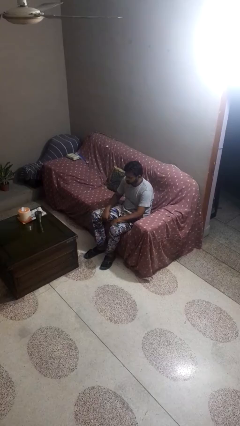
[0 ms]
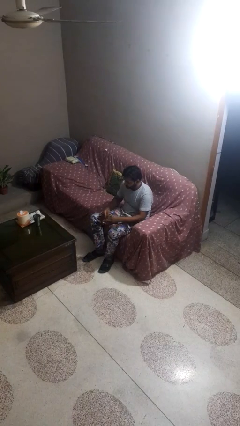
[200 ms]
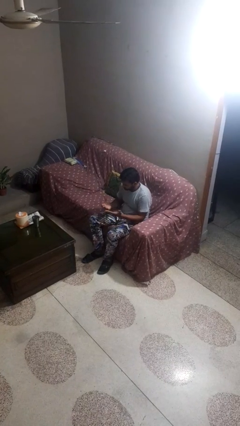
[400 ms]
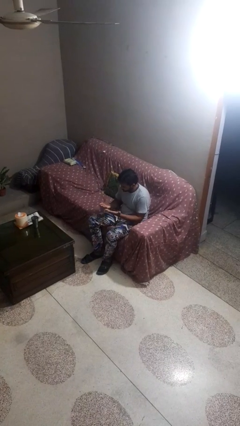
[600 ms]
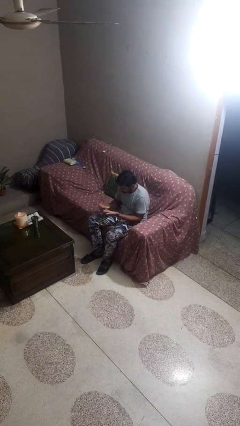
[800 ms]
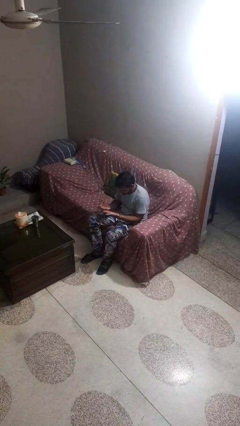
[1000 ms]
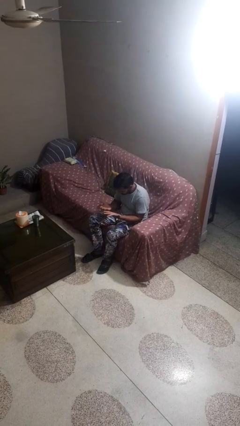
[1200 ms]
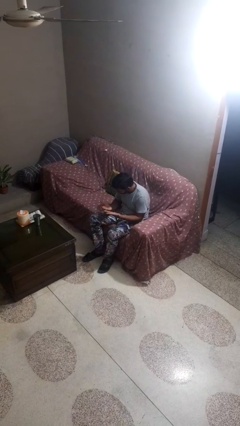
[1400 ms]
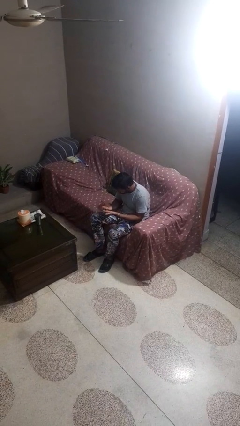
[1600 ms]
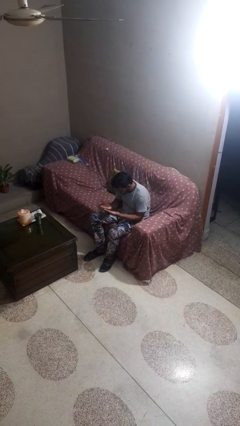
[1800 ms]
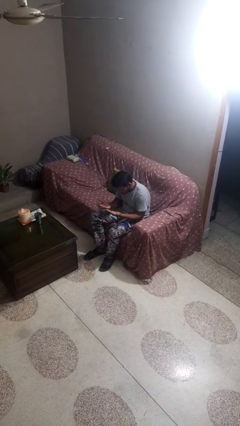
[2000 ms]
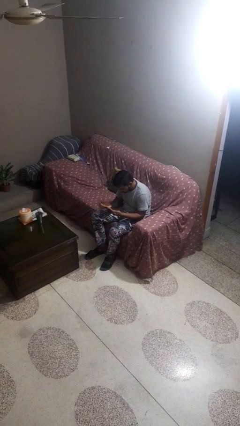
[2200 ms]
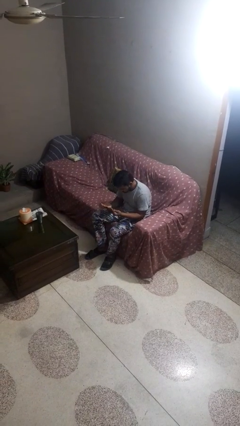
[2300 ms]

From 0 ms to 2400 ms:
person looks at hands in lap

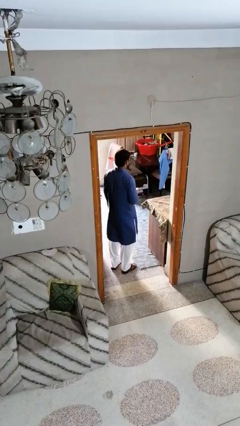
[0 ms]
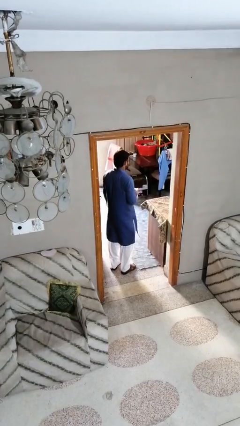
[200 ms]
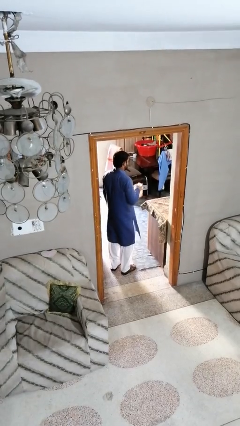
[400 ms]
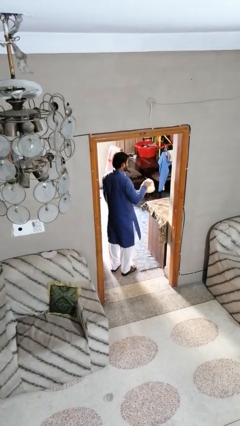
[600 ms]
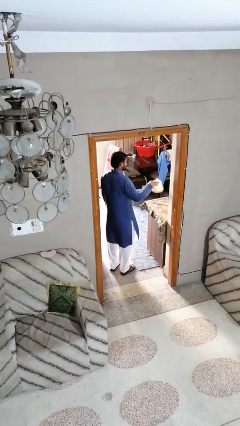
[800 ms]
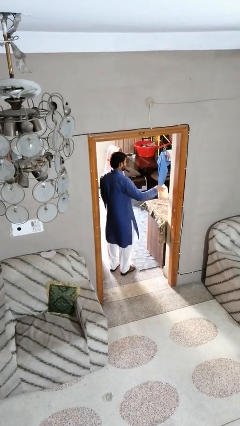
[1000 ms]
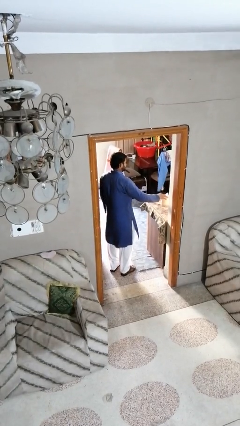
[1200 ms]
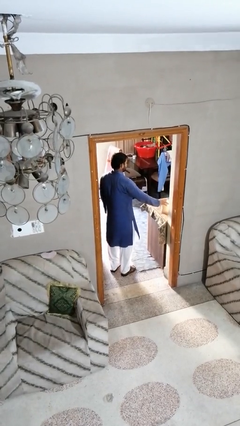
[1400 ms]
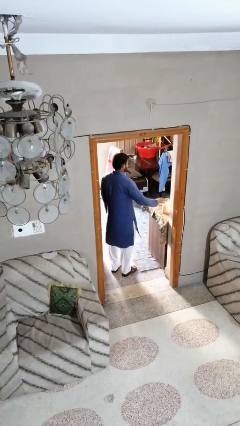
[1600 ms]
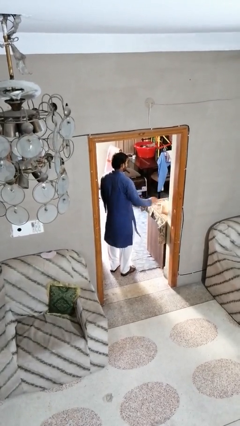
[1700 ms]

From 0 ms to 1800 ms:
person puts down object on countertop

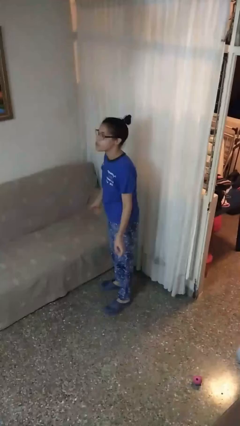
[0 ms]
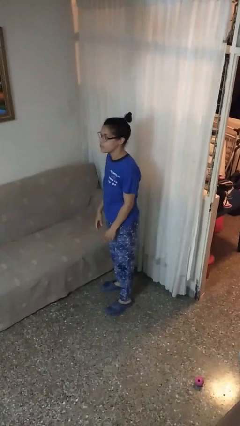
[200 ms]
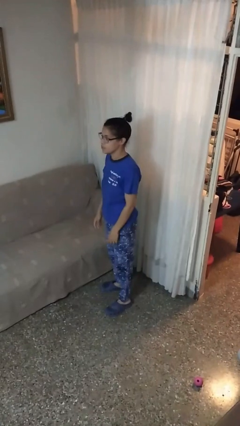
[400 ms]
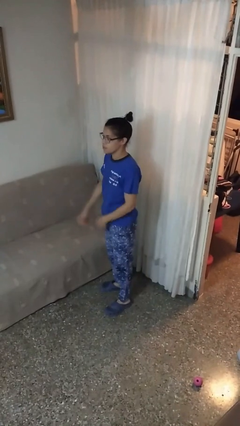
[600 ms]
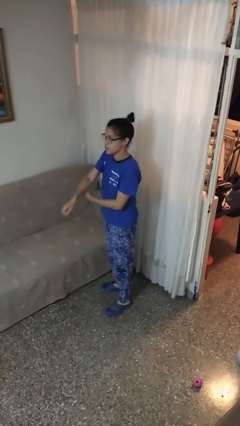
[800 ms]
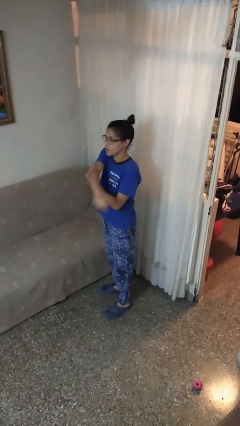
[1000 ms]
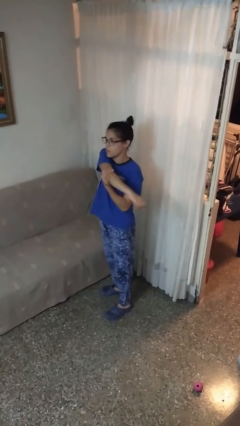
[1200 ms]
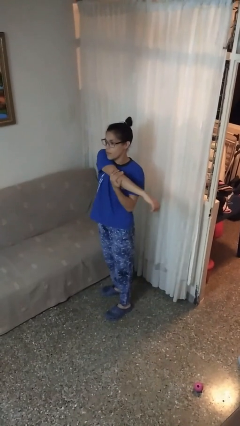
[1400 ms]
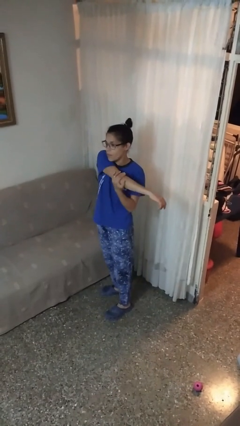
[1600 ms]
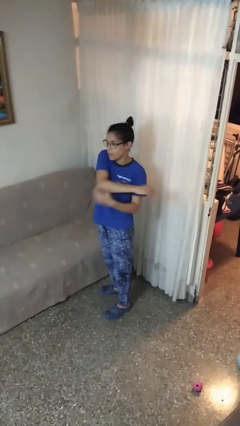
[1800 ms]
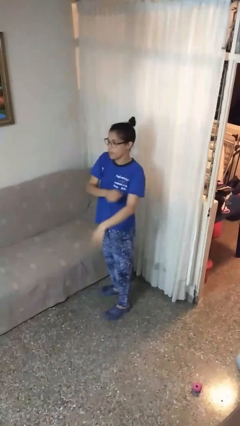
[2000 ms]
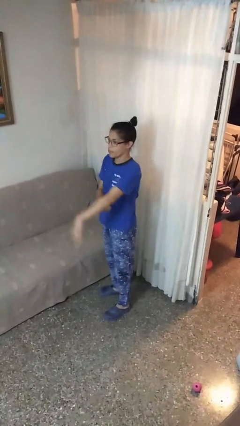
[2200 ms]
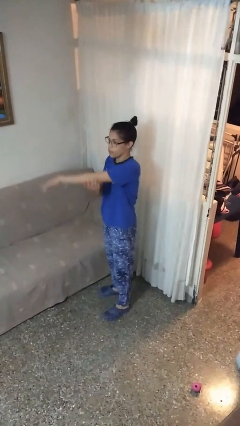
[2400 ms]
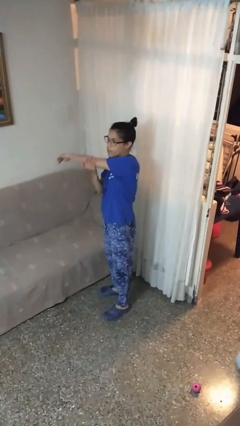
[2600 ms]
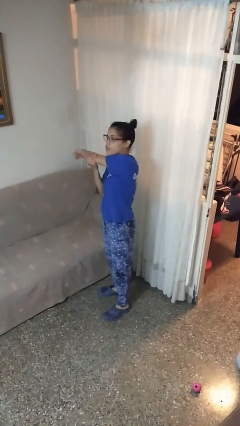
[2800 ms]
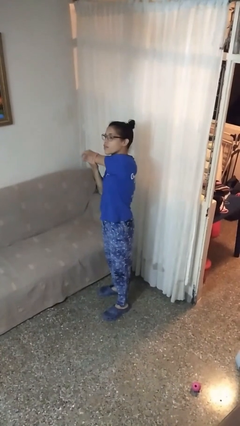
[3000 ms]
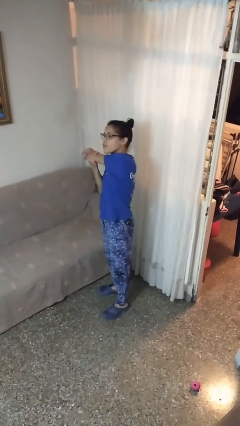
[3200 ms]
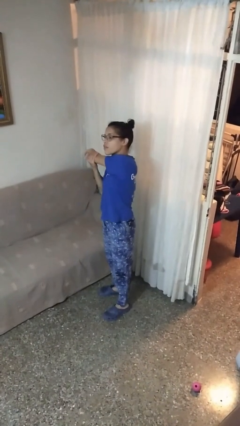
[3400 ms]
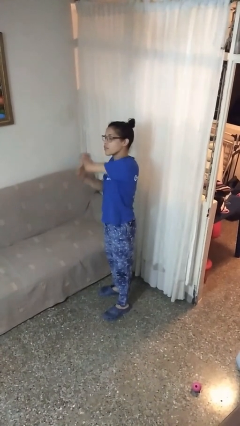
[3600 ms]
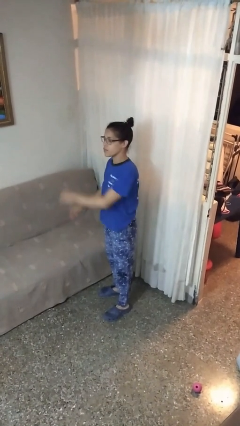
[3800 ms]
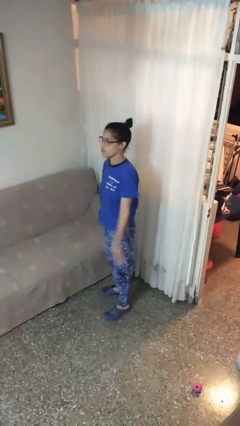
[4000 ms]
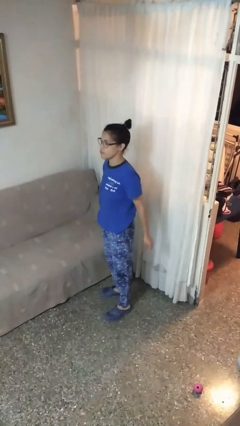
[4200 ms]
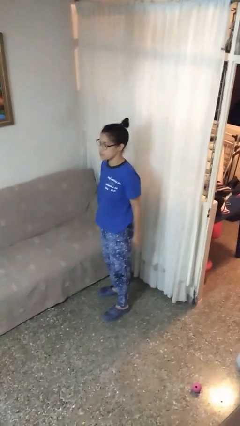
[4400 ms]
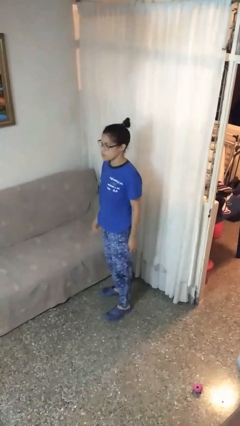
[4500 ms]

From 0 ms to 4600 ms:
person stretches arms to side

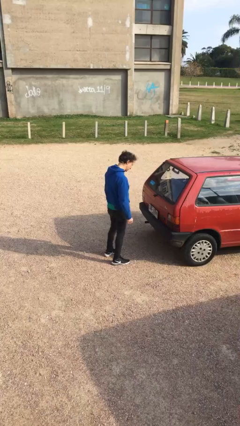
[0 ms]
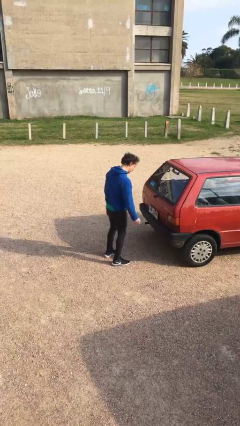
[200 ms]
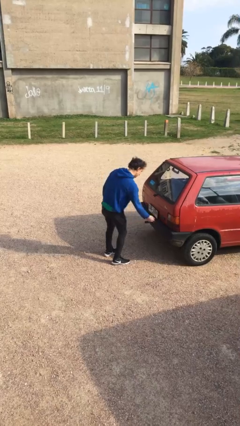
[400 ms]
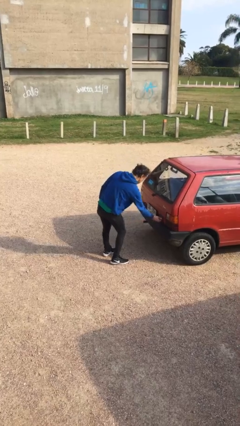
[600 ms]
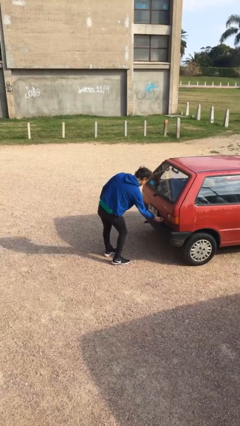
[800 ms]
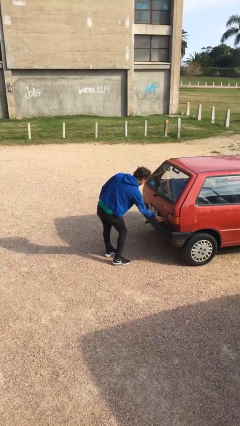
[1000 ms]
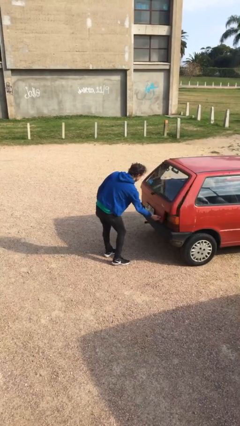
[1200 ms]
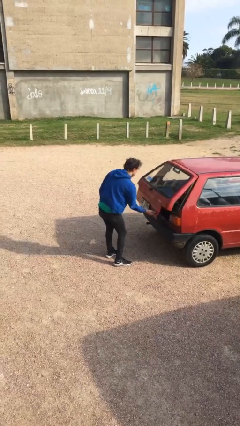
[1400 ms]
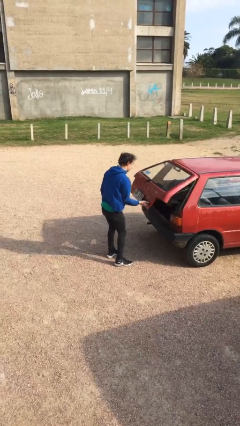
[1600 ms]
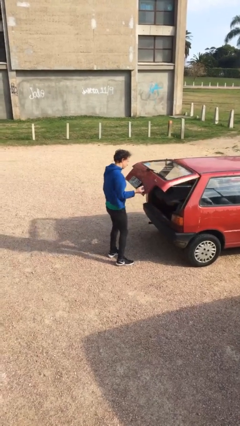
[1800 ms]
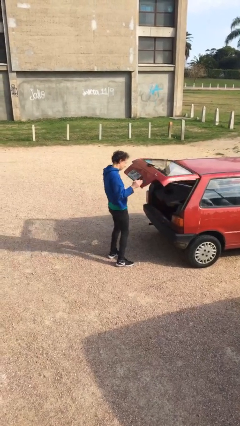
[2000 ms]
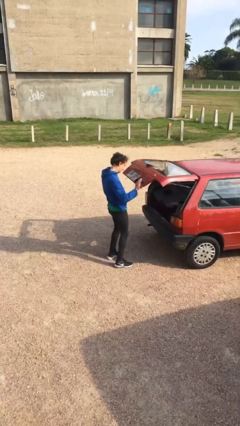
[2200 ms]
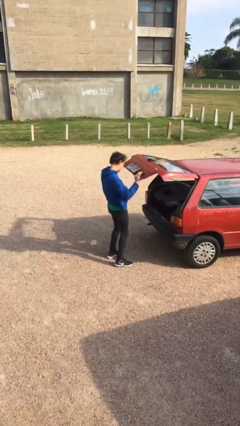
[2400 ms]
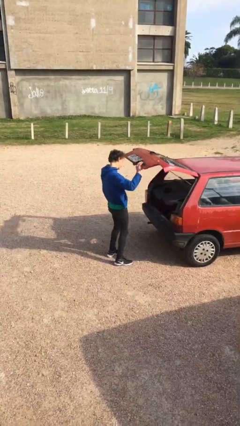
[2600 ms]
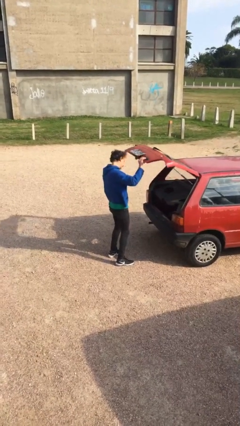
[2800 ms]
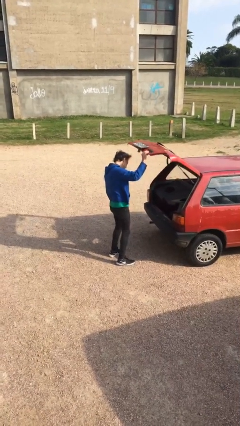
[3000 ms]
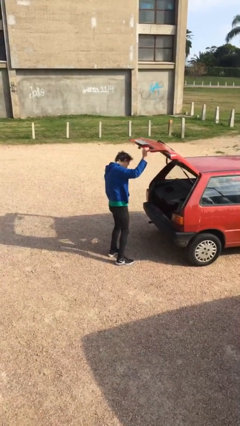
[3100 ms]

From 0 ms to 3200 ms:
person opens car door

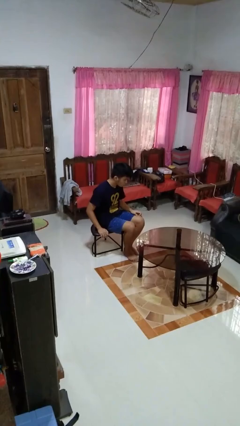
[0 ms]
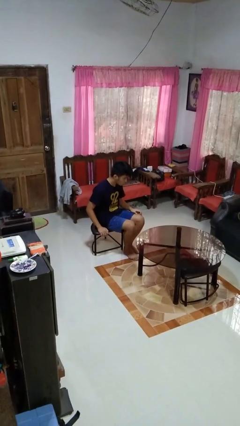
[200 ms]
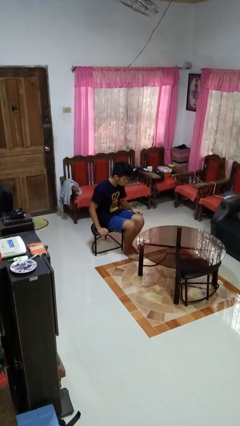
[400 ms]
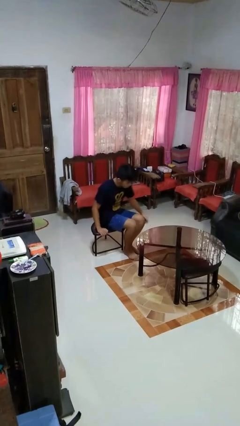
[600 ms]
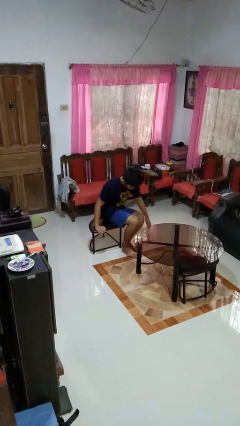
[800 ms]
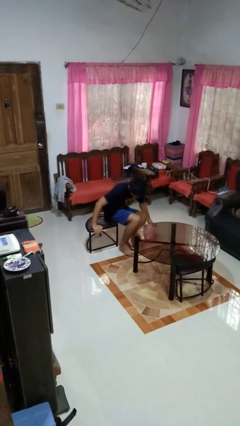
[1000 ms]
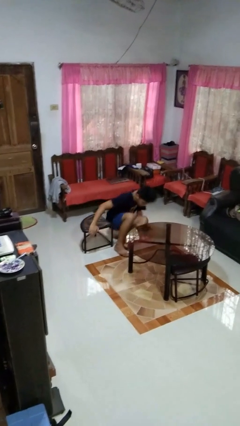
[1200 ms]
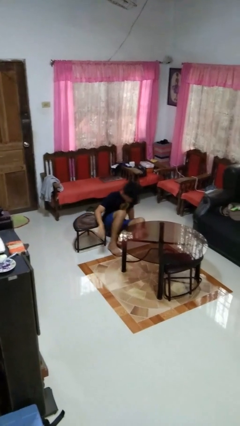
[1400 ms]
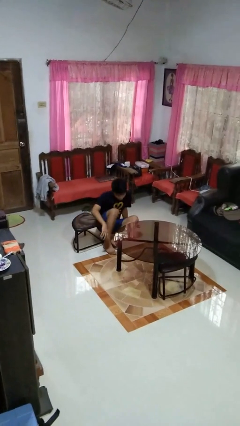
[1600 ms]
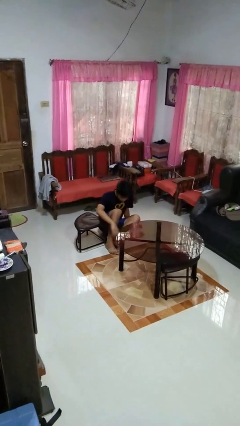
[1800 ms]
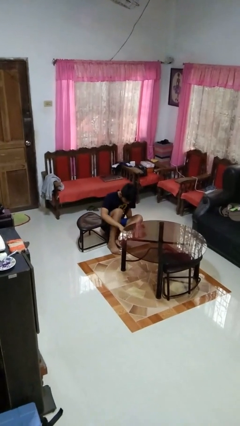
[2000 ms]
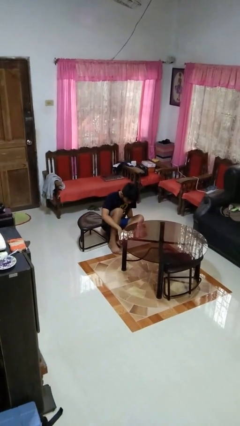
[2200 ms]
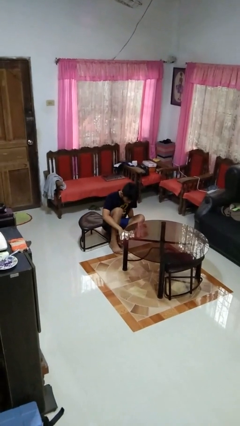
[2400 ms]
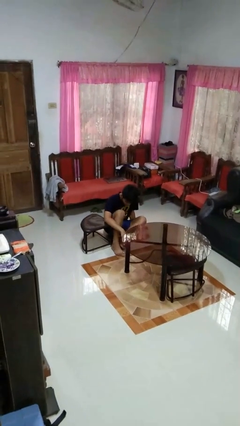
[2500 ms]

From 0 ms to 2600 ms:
person falls from chair

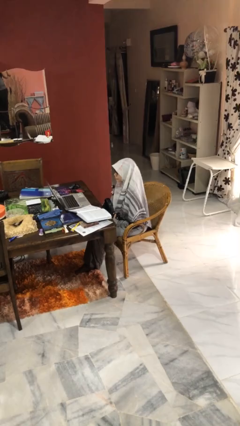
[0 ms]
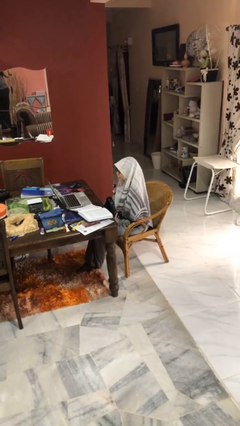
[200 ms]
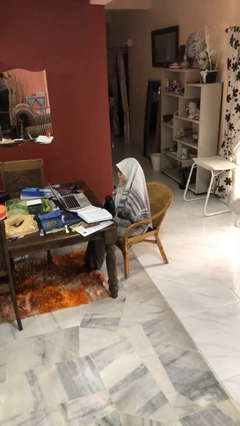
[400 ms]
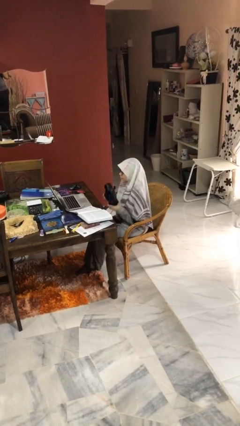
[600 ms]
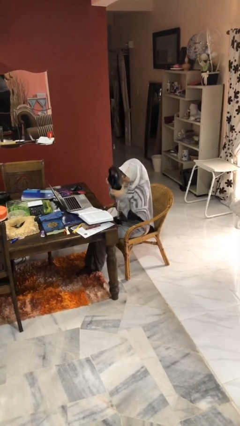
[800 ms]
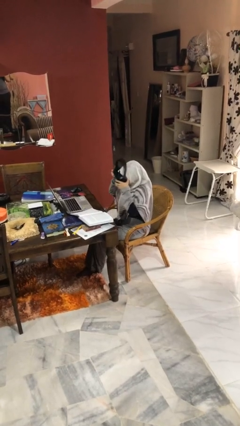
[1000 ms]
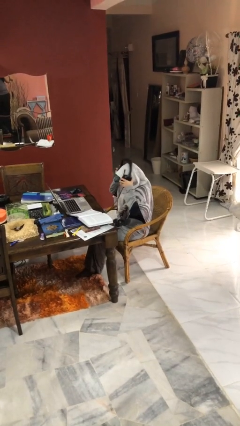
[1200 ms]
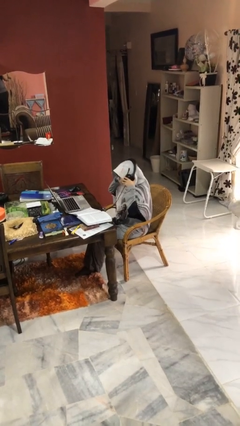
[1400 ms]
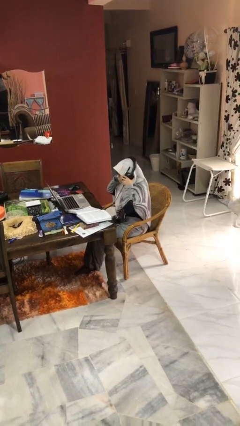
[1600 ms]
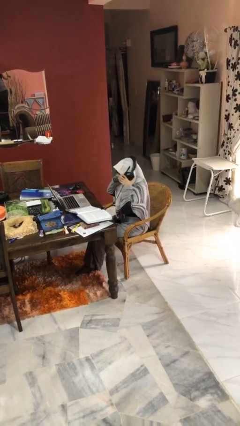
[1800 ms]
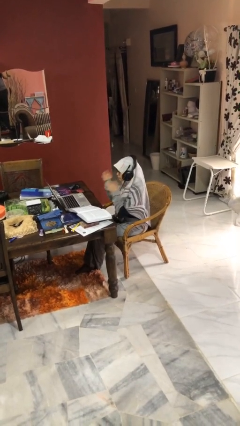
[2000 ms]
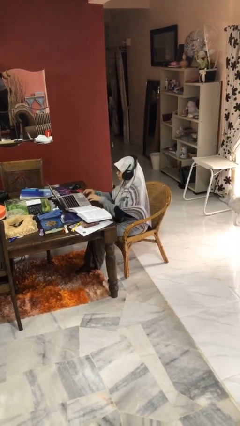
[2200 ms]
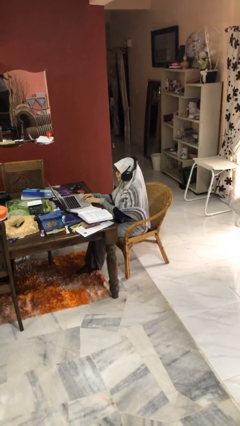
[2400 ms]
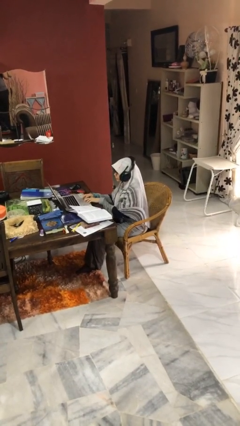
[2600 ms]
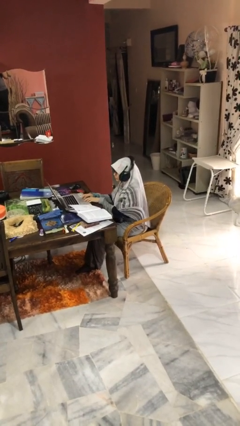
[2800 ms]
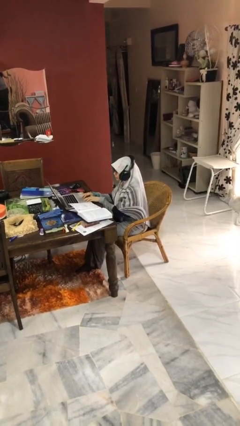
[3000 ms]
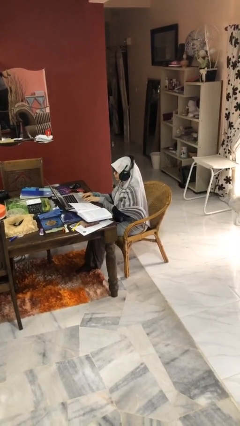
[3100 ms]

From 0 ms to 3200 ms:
person puts on headphones
